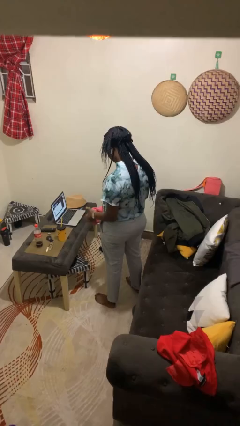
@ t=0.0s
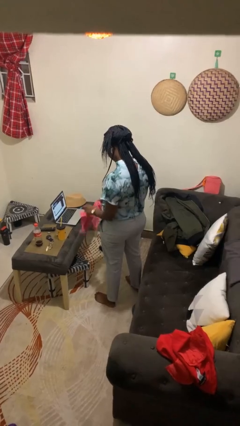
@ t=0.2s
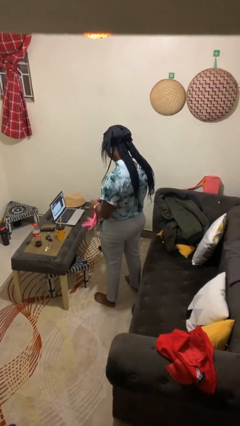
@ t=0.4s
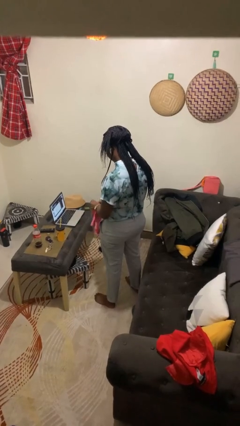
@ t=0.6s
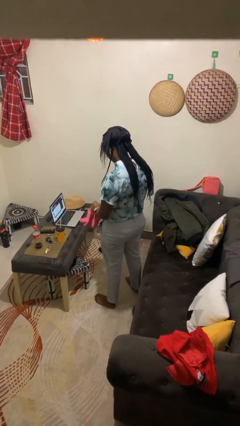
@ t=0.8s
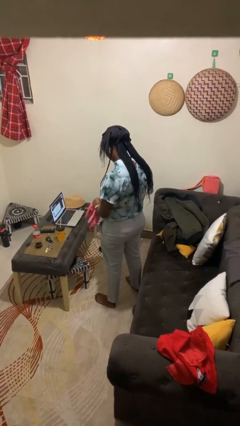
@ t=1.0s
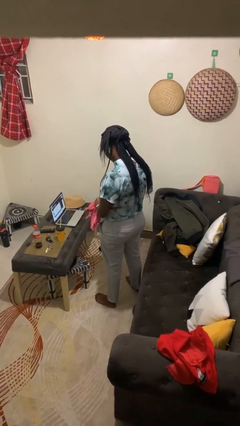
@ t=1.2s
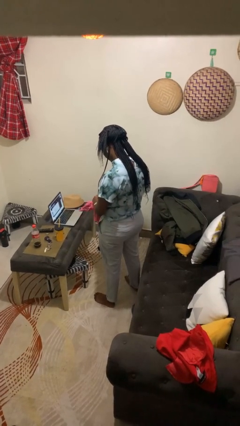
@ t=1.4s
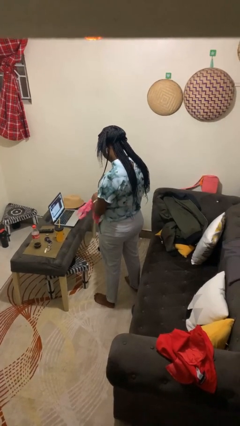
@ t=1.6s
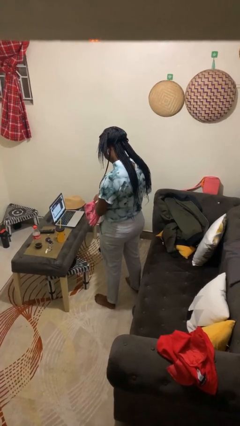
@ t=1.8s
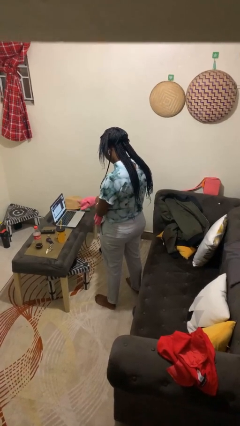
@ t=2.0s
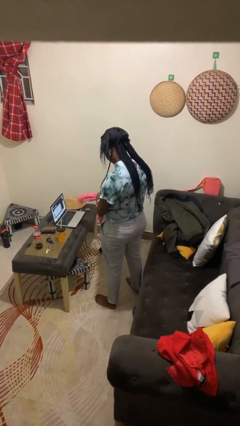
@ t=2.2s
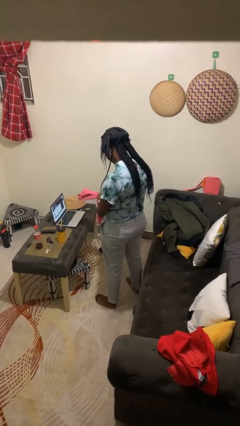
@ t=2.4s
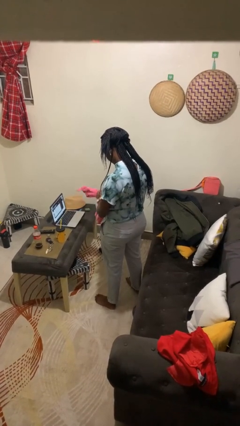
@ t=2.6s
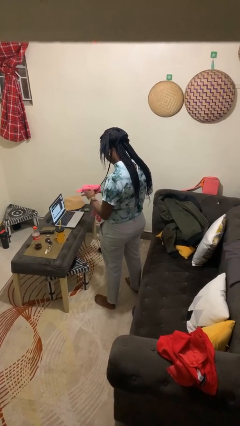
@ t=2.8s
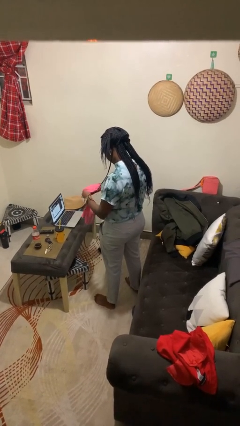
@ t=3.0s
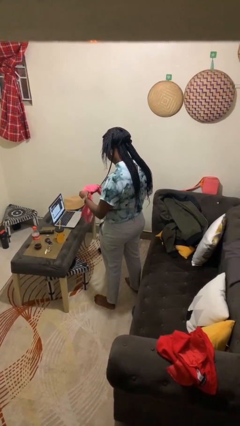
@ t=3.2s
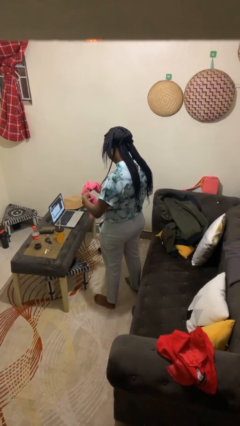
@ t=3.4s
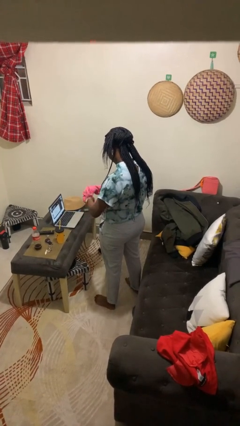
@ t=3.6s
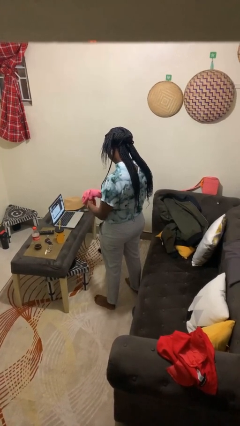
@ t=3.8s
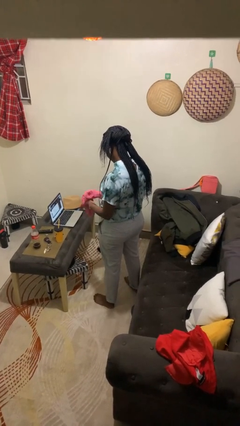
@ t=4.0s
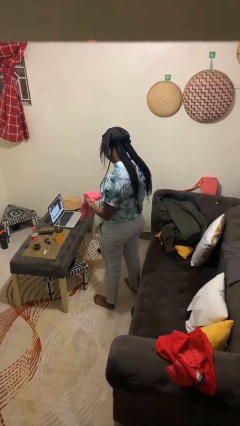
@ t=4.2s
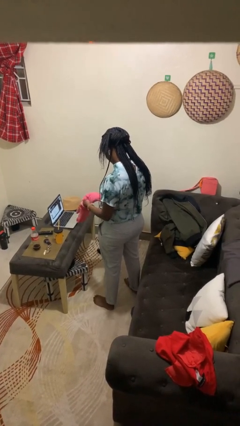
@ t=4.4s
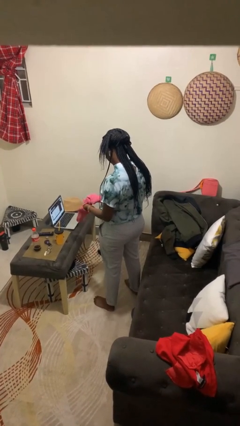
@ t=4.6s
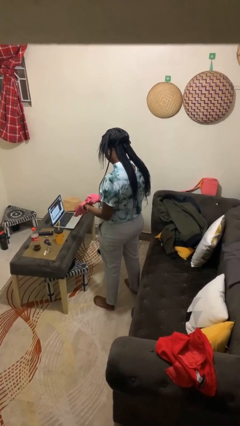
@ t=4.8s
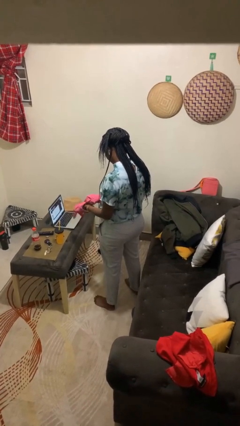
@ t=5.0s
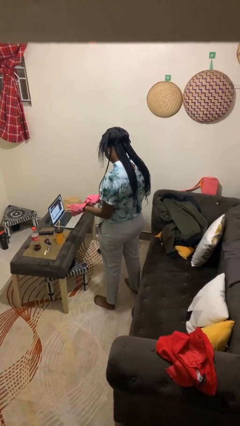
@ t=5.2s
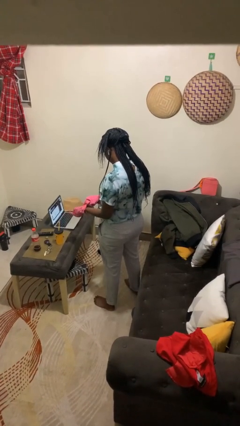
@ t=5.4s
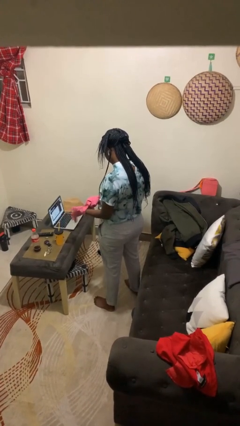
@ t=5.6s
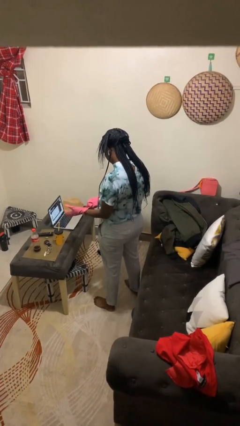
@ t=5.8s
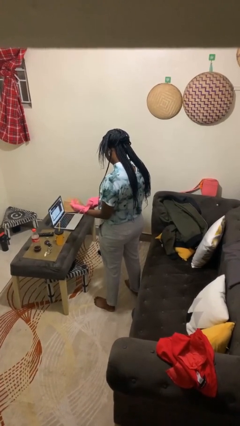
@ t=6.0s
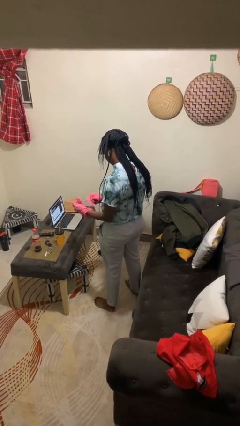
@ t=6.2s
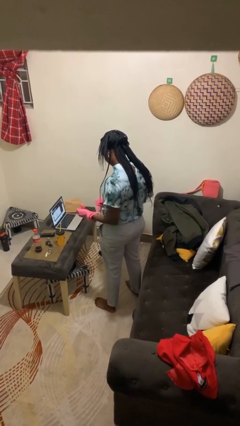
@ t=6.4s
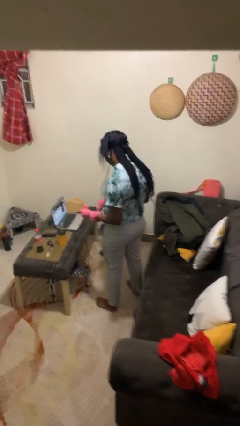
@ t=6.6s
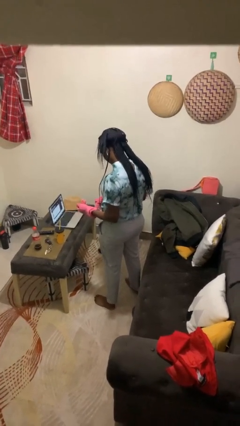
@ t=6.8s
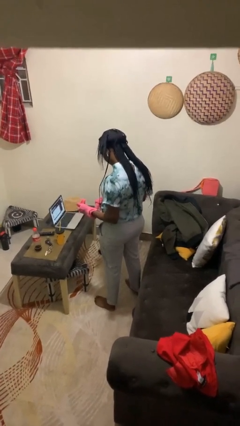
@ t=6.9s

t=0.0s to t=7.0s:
person puts on gloves

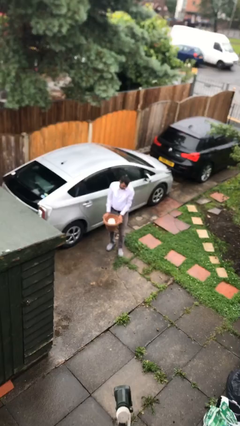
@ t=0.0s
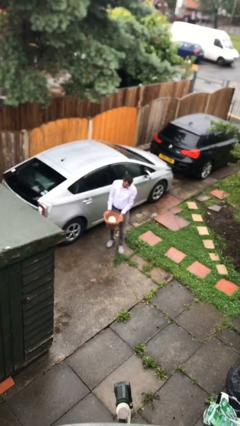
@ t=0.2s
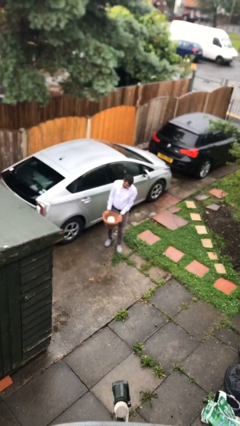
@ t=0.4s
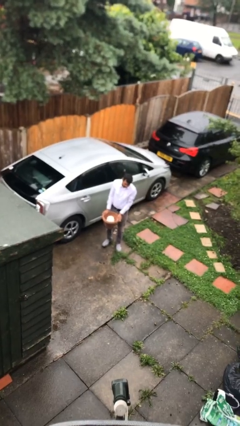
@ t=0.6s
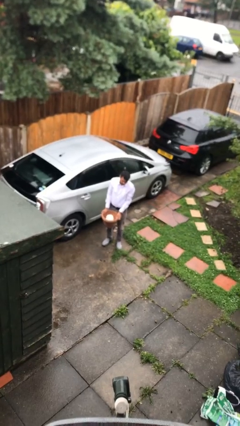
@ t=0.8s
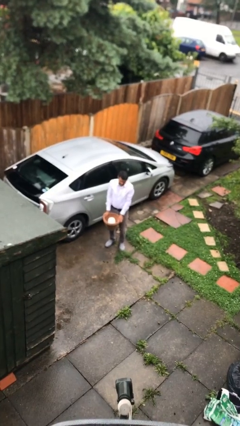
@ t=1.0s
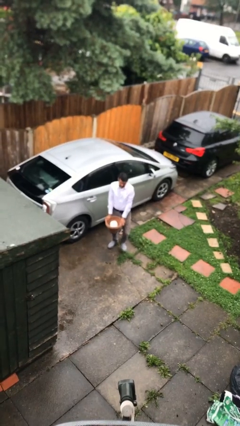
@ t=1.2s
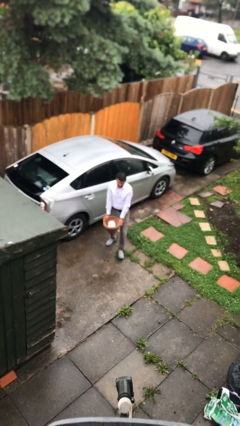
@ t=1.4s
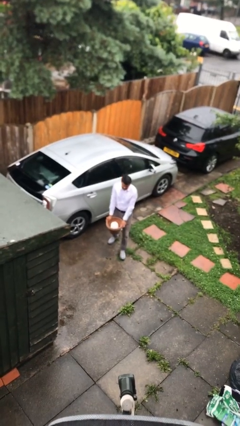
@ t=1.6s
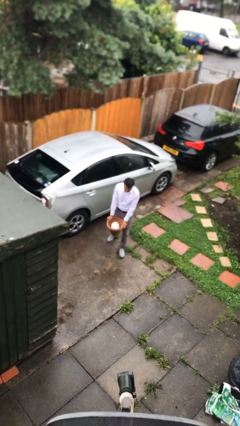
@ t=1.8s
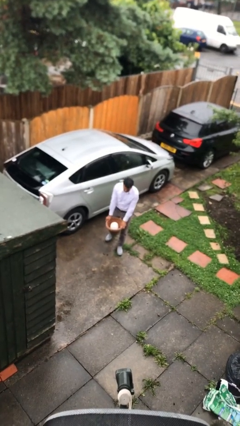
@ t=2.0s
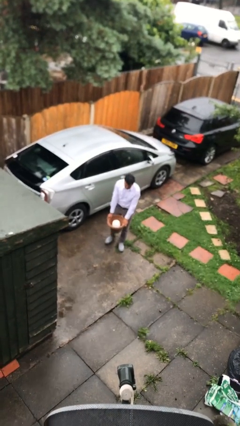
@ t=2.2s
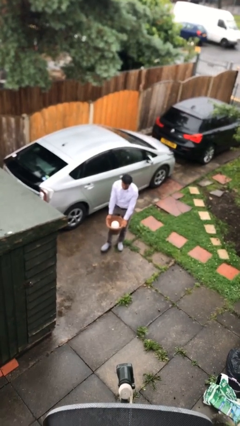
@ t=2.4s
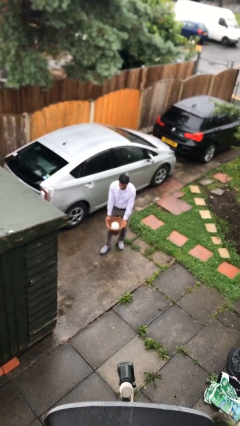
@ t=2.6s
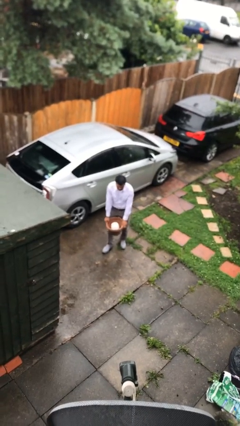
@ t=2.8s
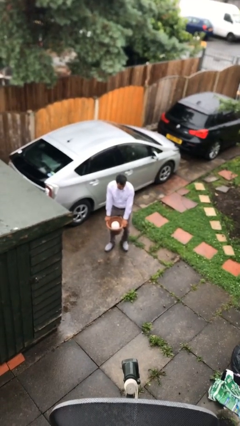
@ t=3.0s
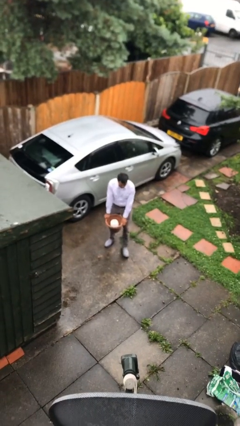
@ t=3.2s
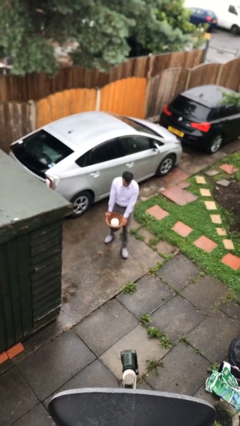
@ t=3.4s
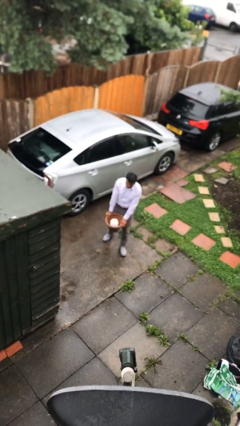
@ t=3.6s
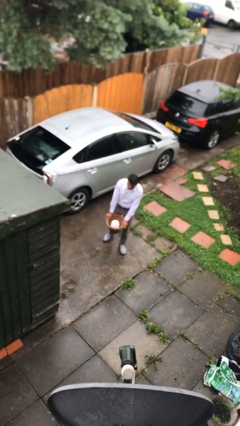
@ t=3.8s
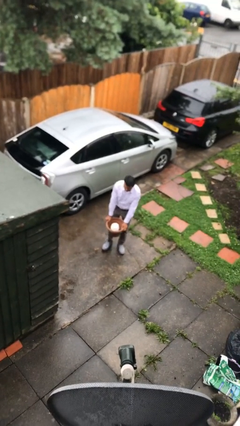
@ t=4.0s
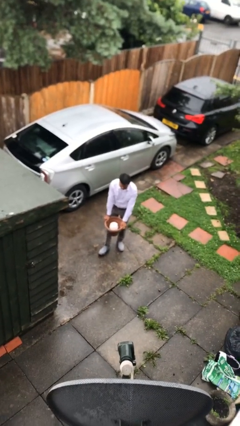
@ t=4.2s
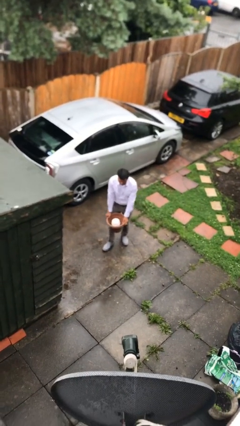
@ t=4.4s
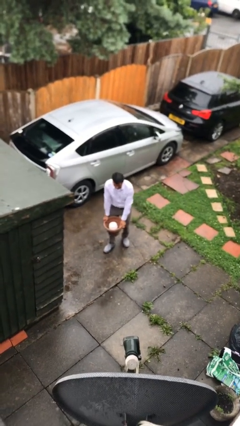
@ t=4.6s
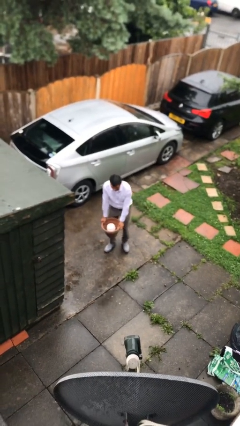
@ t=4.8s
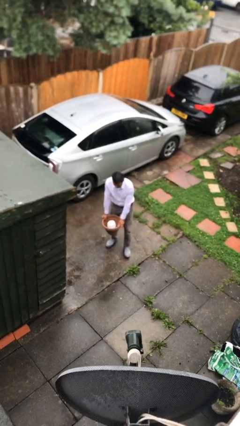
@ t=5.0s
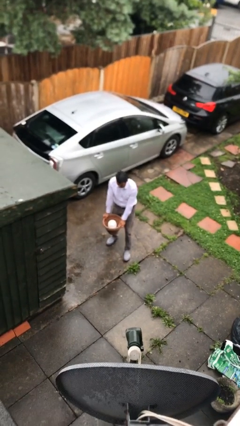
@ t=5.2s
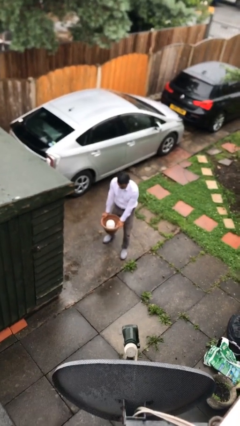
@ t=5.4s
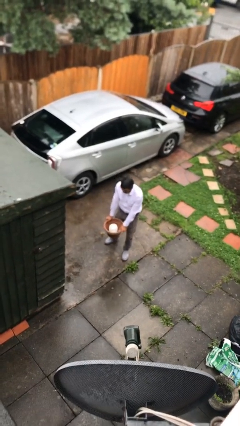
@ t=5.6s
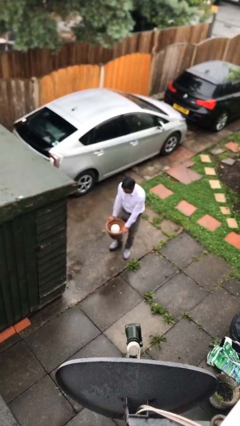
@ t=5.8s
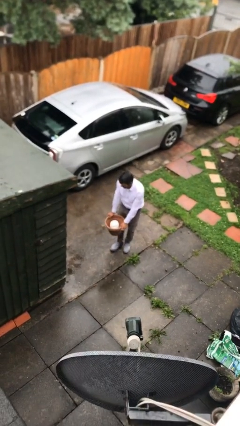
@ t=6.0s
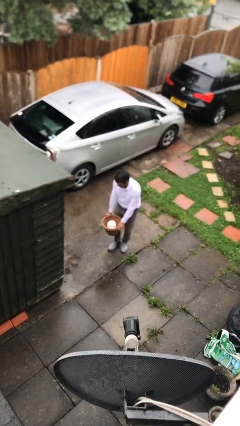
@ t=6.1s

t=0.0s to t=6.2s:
person carries heavy object

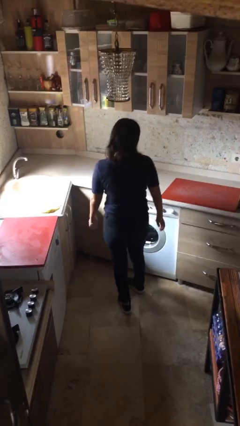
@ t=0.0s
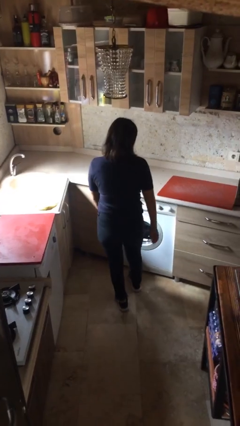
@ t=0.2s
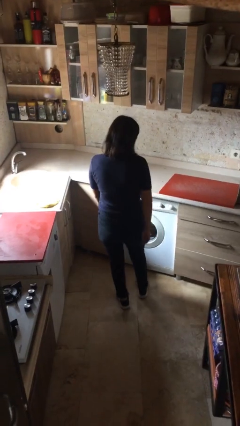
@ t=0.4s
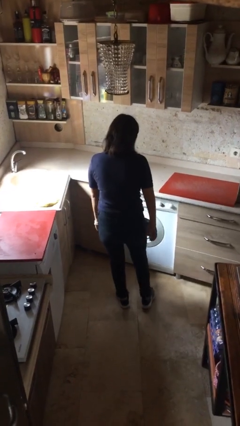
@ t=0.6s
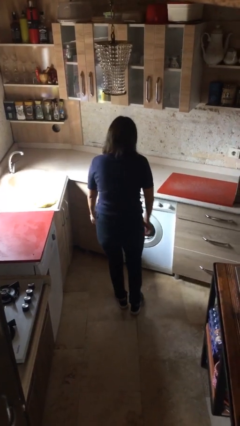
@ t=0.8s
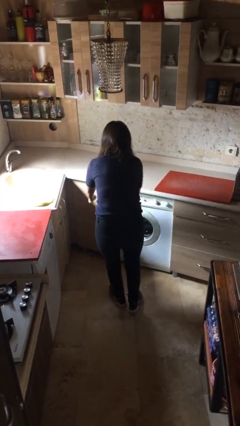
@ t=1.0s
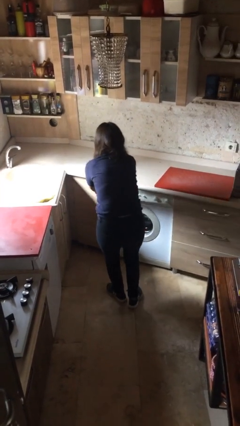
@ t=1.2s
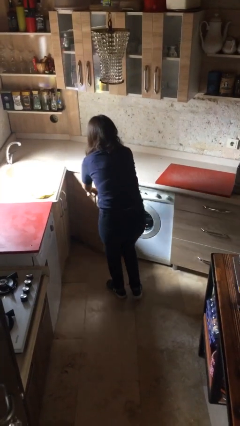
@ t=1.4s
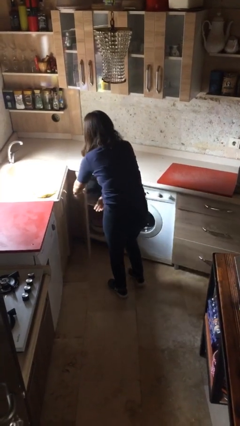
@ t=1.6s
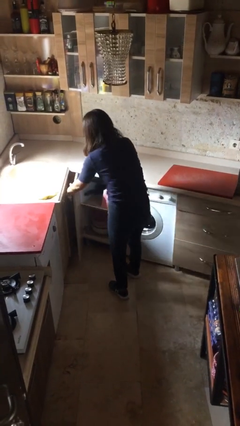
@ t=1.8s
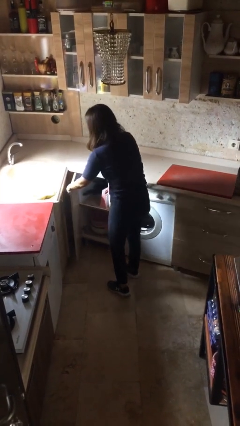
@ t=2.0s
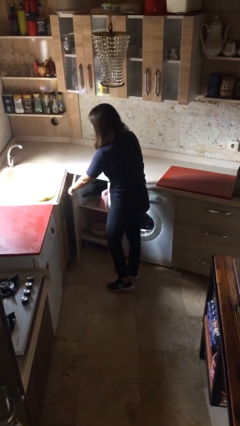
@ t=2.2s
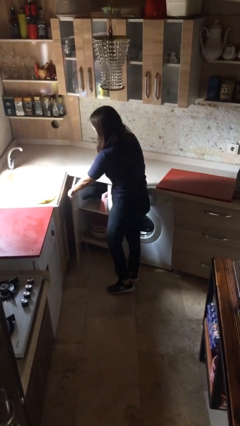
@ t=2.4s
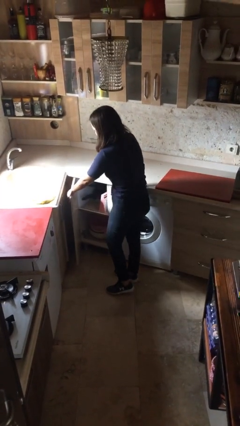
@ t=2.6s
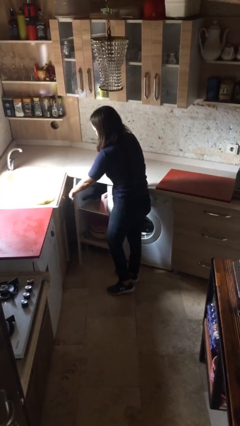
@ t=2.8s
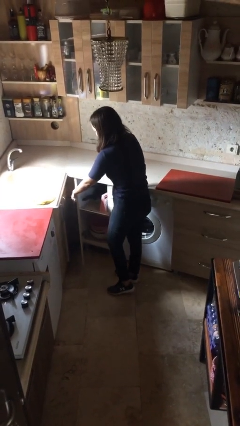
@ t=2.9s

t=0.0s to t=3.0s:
person opens cabinet

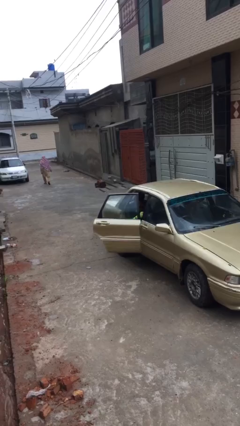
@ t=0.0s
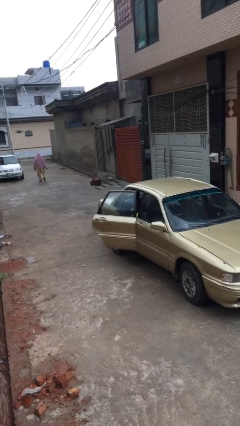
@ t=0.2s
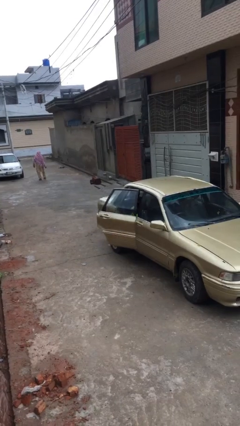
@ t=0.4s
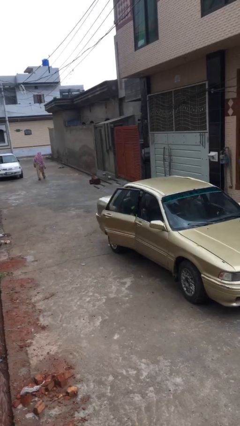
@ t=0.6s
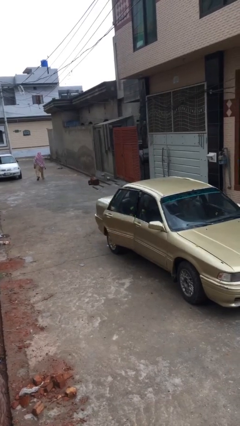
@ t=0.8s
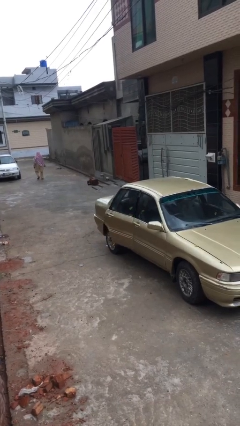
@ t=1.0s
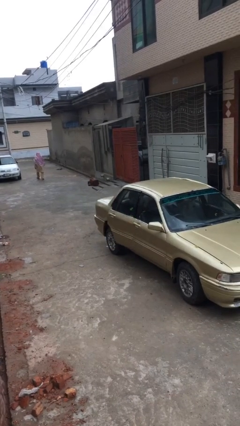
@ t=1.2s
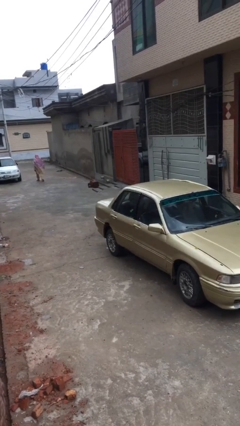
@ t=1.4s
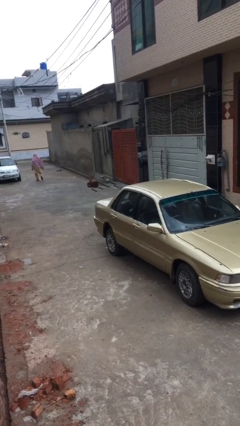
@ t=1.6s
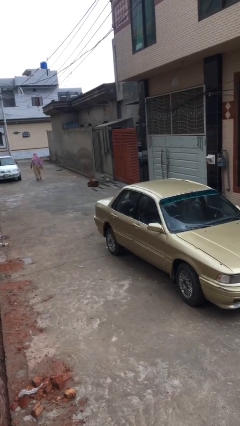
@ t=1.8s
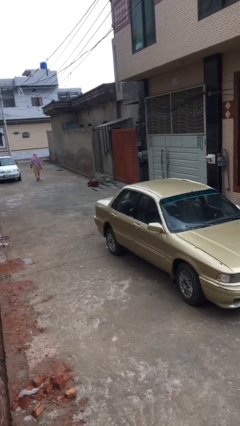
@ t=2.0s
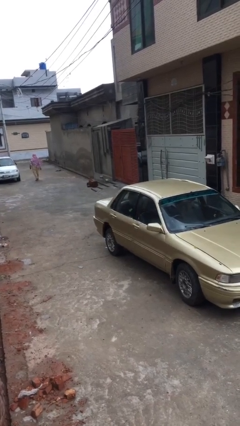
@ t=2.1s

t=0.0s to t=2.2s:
person closes car door
